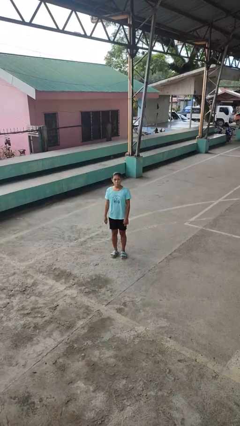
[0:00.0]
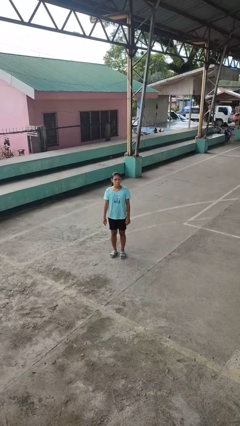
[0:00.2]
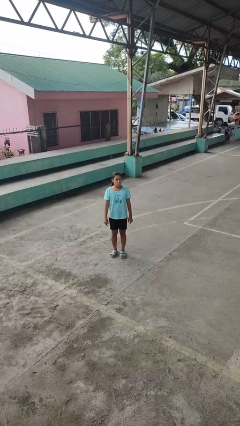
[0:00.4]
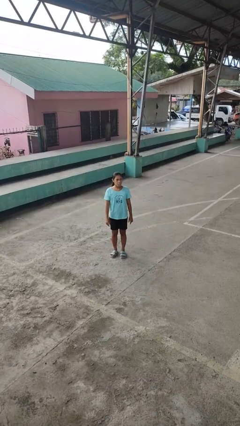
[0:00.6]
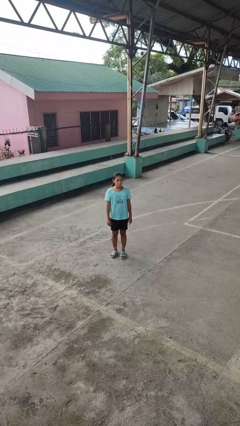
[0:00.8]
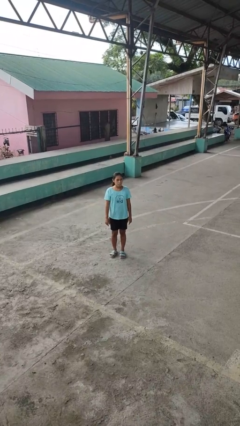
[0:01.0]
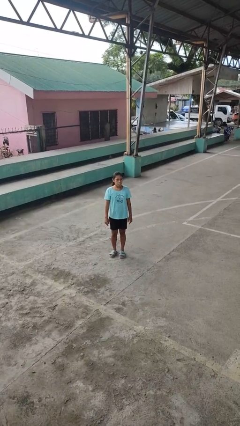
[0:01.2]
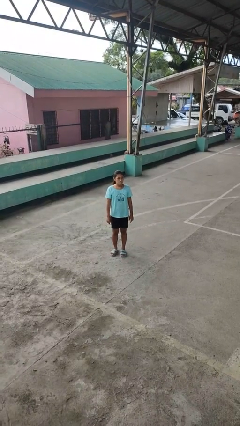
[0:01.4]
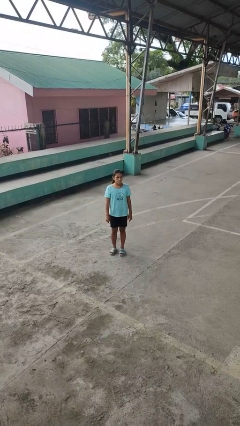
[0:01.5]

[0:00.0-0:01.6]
person sticks out tongue

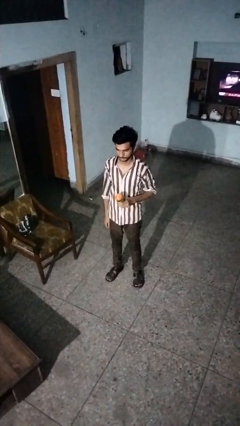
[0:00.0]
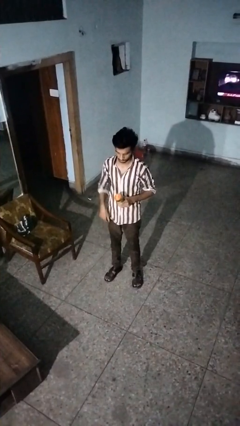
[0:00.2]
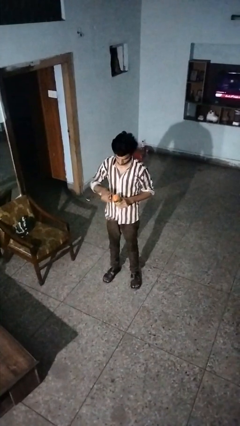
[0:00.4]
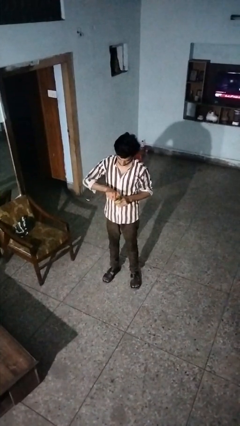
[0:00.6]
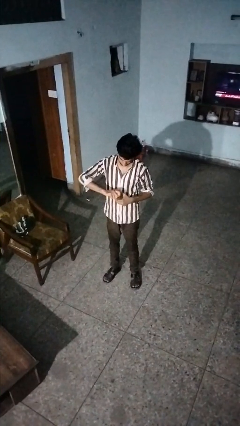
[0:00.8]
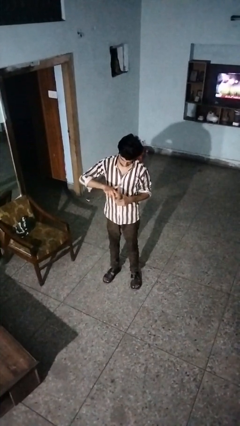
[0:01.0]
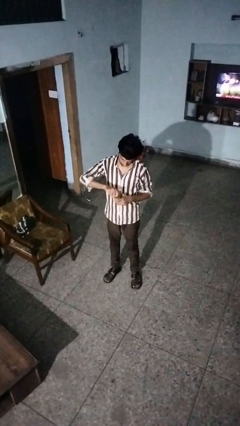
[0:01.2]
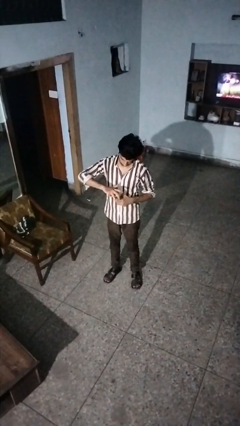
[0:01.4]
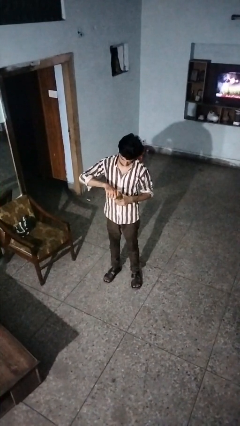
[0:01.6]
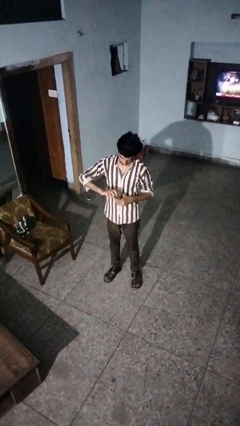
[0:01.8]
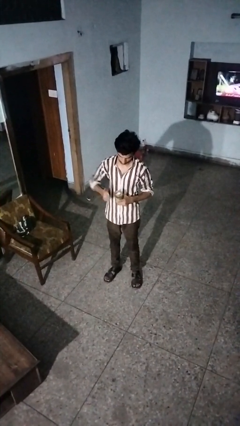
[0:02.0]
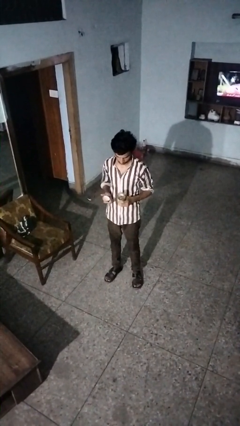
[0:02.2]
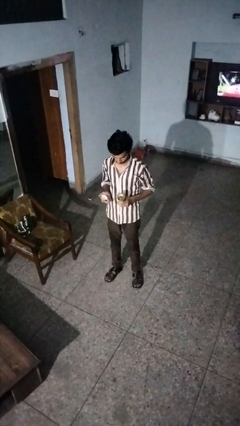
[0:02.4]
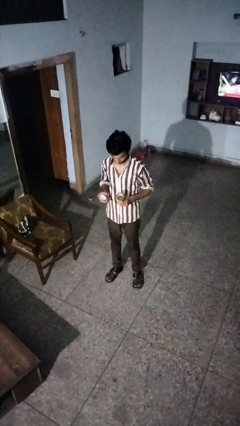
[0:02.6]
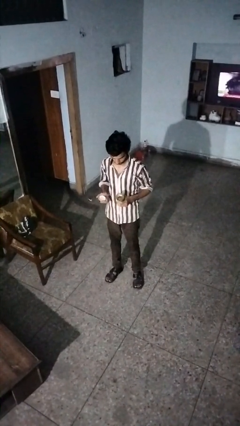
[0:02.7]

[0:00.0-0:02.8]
person opens jar

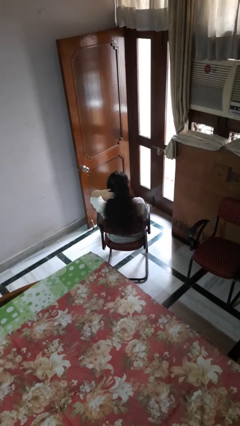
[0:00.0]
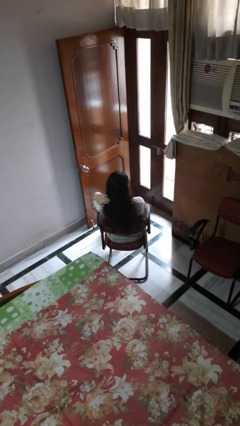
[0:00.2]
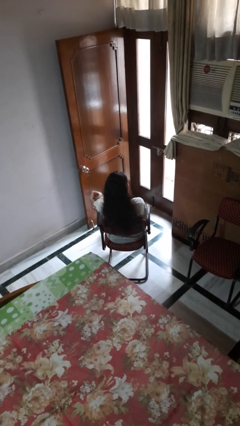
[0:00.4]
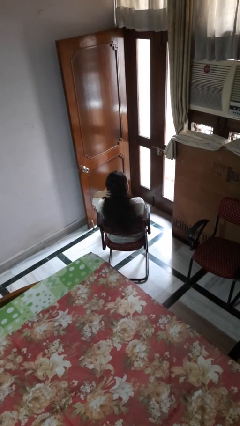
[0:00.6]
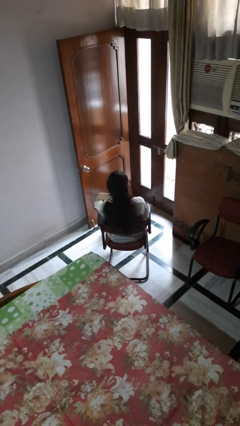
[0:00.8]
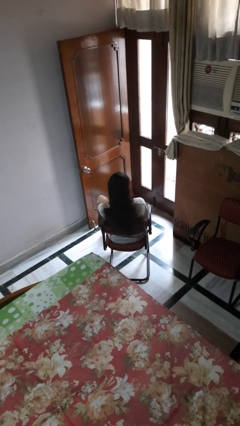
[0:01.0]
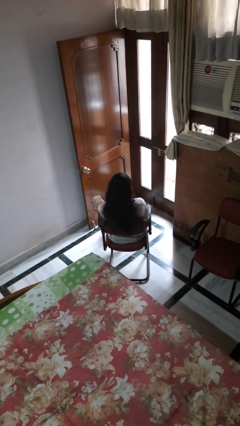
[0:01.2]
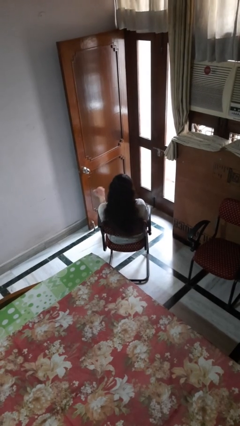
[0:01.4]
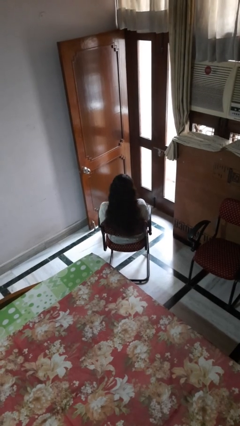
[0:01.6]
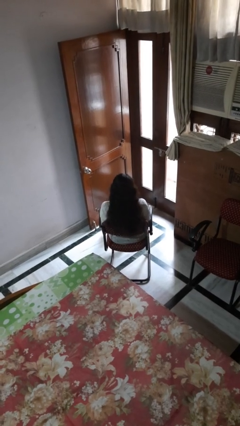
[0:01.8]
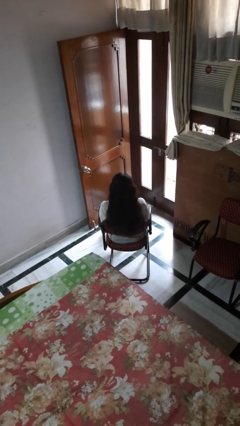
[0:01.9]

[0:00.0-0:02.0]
person strokes hair

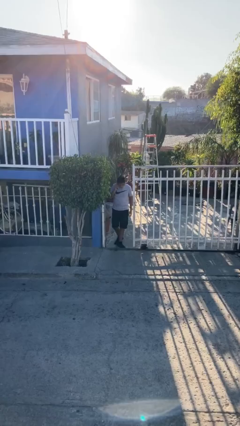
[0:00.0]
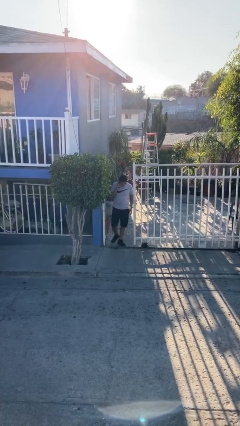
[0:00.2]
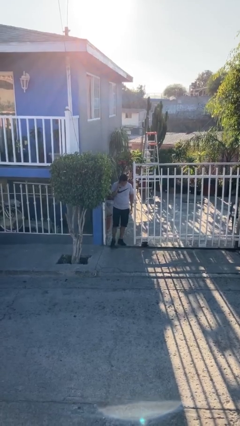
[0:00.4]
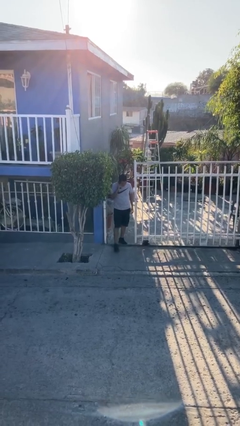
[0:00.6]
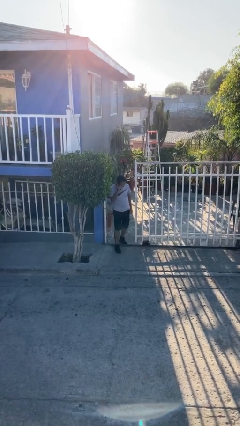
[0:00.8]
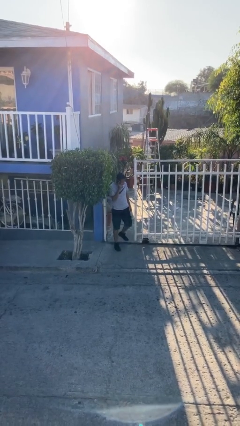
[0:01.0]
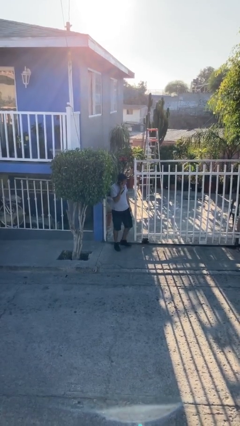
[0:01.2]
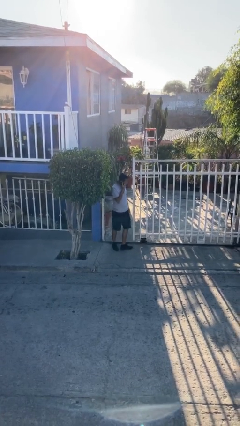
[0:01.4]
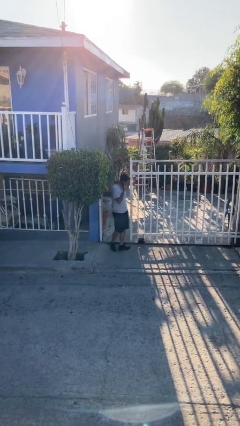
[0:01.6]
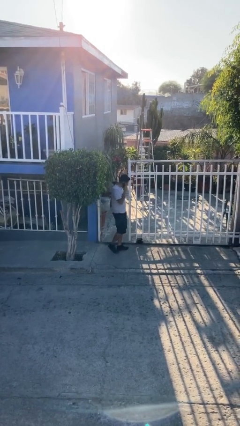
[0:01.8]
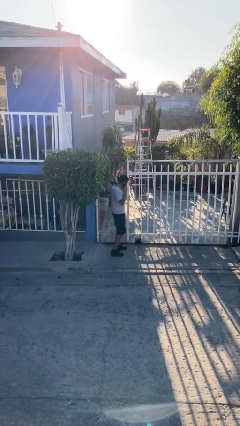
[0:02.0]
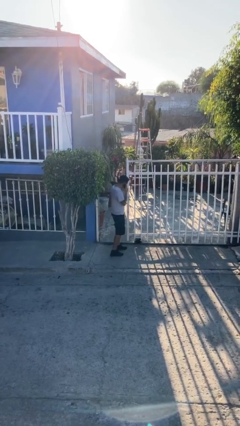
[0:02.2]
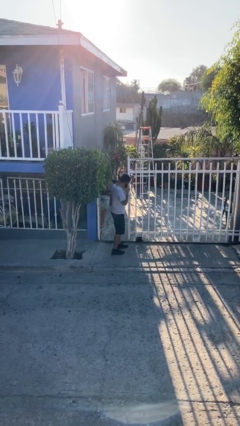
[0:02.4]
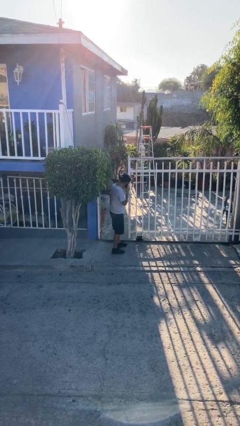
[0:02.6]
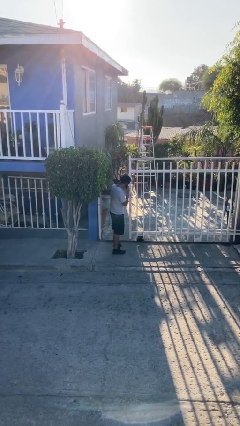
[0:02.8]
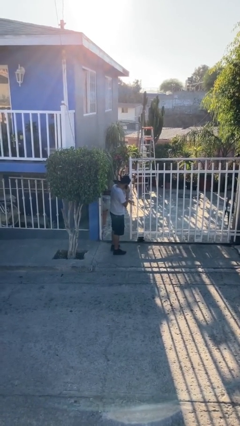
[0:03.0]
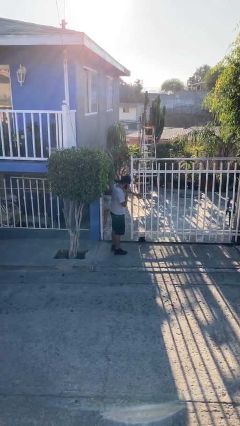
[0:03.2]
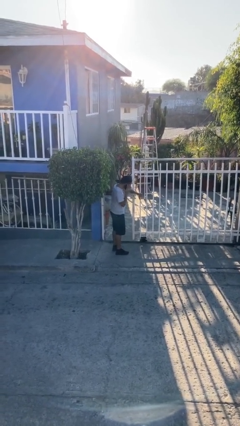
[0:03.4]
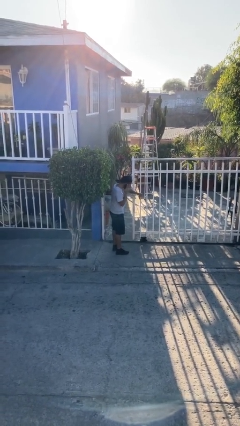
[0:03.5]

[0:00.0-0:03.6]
person enters scene through structure

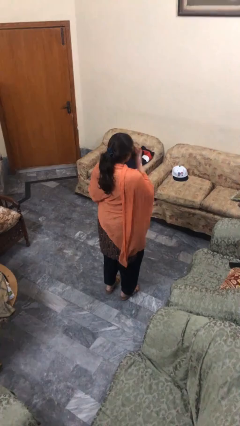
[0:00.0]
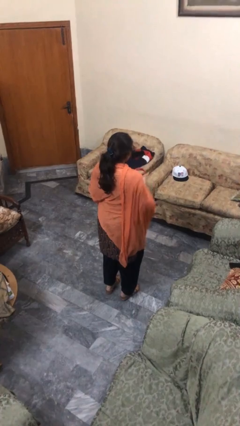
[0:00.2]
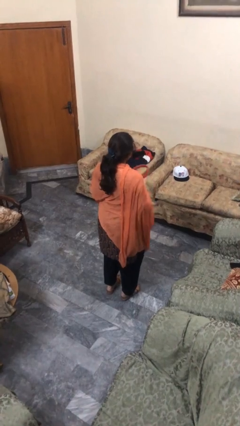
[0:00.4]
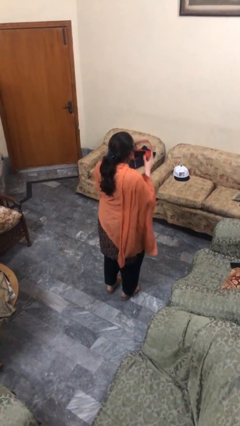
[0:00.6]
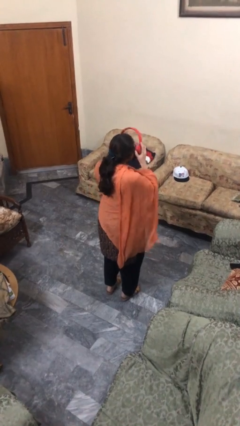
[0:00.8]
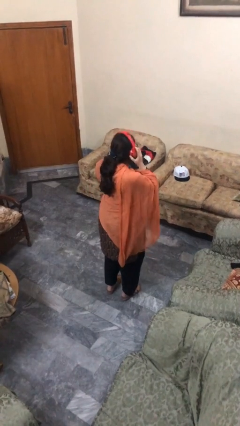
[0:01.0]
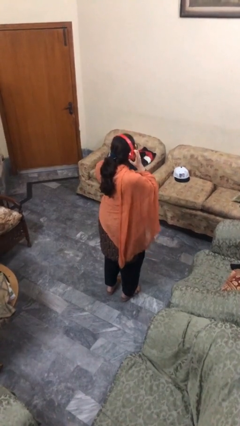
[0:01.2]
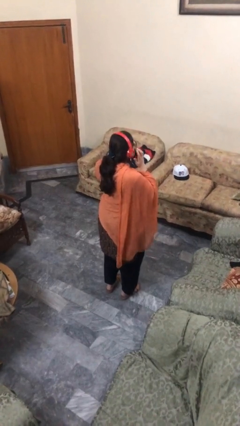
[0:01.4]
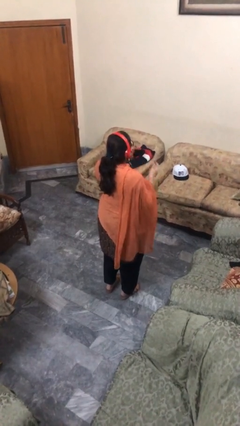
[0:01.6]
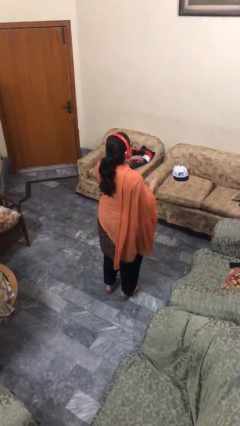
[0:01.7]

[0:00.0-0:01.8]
person puts on headphones

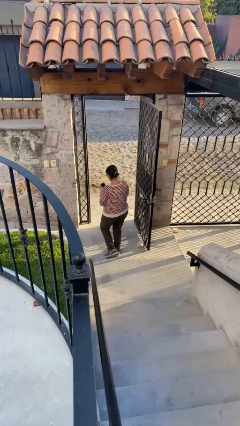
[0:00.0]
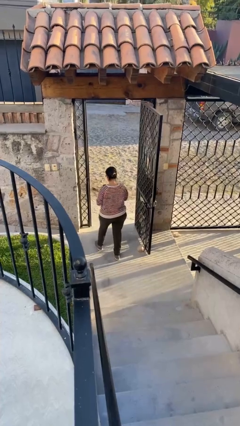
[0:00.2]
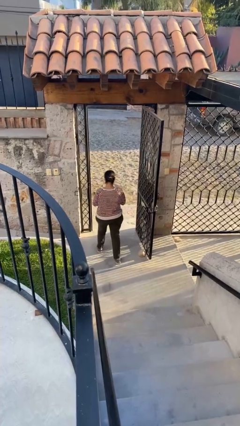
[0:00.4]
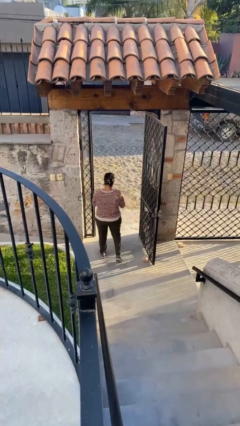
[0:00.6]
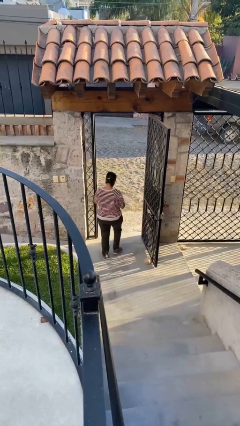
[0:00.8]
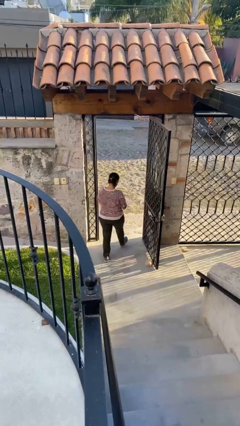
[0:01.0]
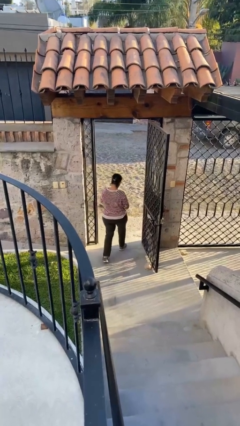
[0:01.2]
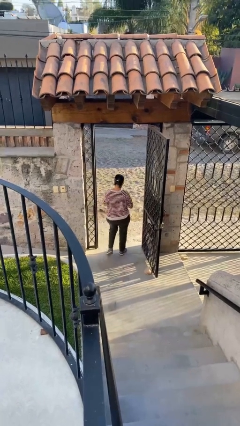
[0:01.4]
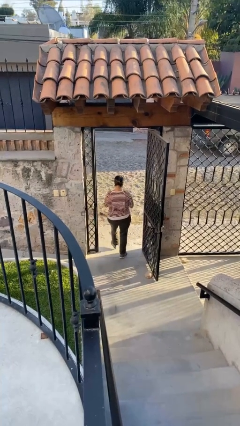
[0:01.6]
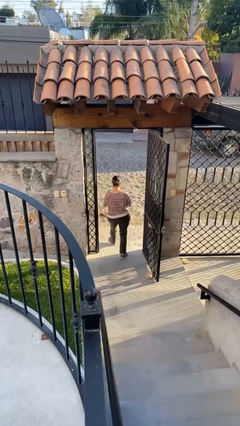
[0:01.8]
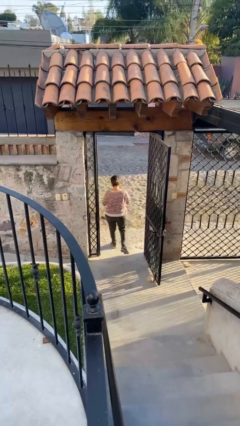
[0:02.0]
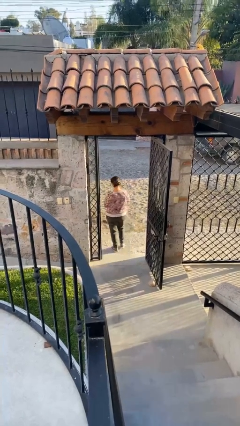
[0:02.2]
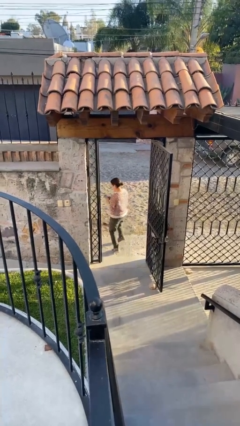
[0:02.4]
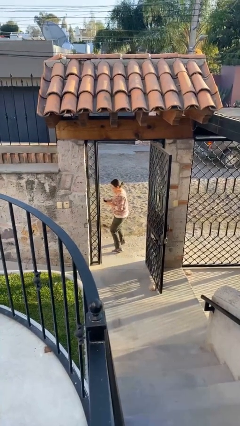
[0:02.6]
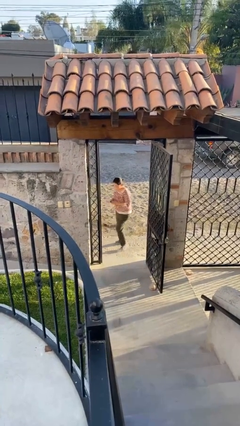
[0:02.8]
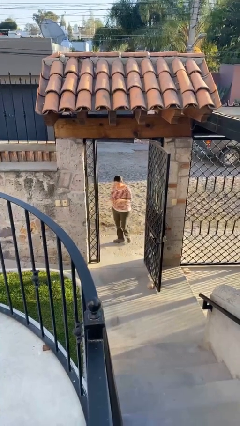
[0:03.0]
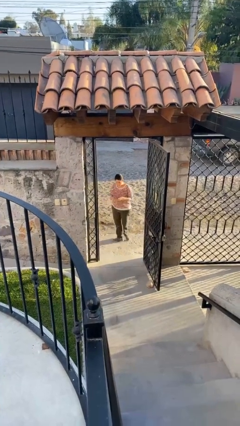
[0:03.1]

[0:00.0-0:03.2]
person exits scene through structure

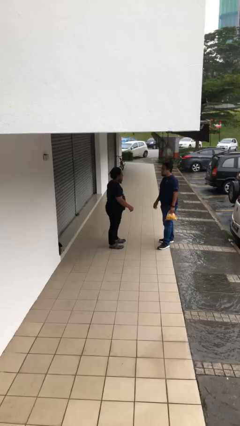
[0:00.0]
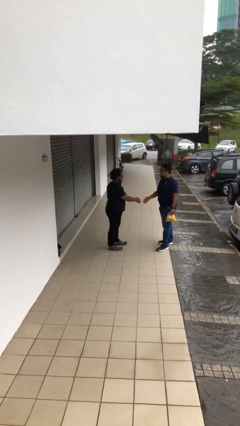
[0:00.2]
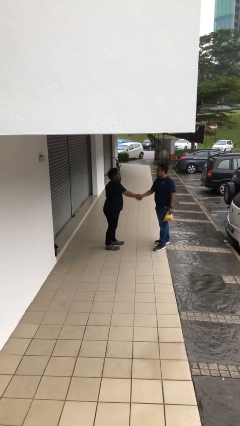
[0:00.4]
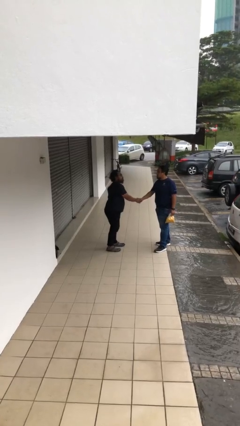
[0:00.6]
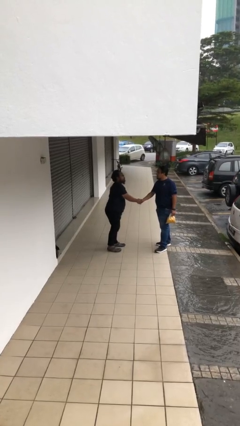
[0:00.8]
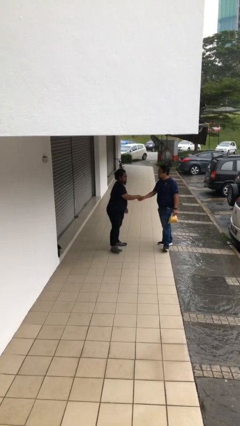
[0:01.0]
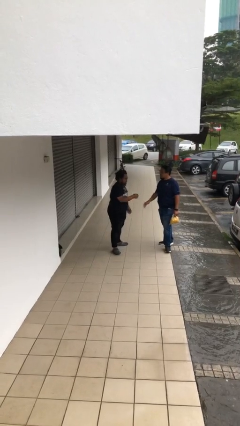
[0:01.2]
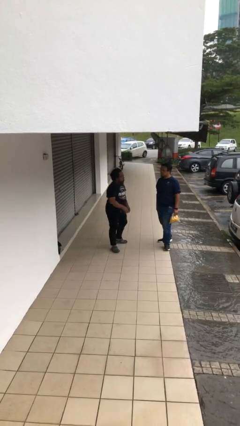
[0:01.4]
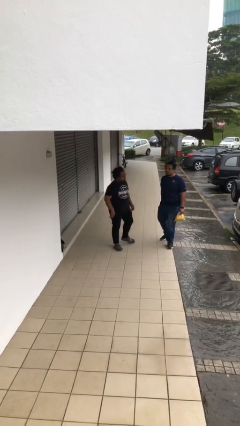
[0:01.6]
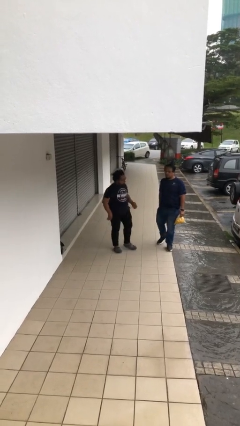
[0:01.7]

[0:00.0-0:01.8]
person shakes hand

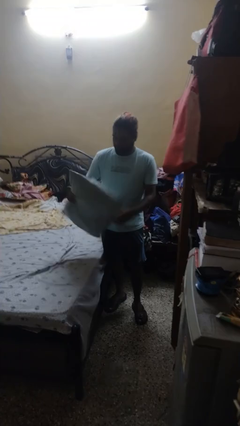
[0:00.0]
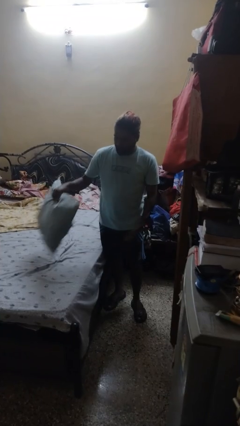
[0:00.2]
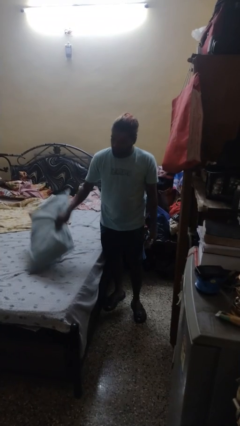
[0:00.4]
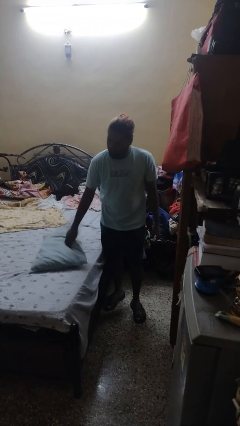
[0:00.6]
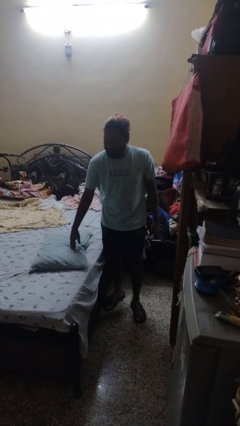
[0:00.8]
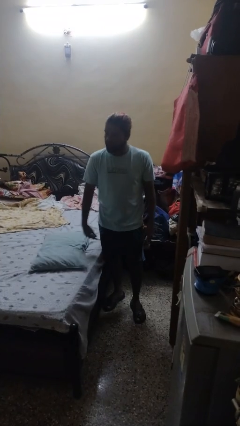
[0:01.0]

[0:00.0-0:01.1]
person puts down object on bed
